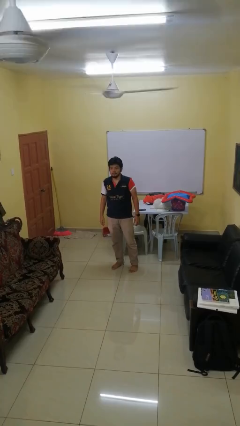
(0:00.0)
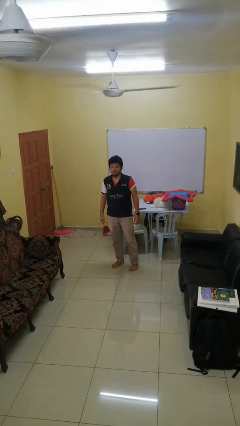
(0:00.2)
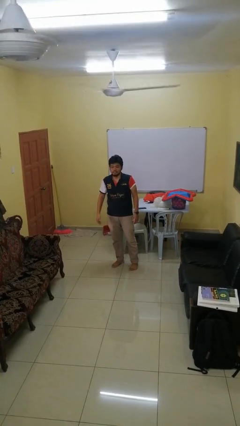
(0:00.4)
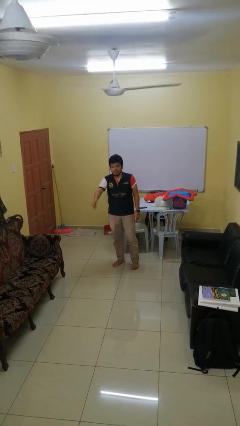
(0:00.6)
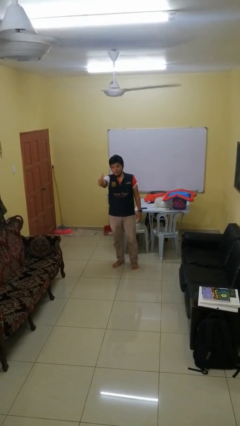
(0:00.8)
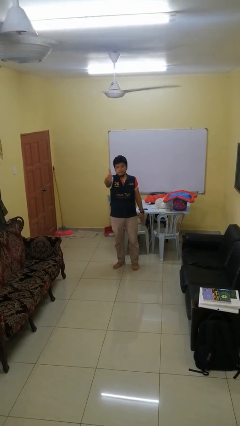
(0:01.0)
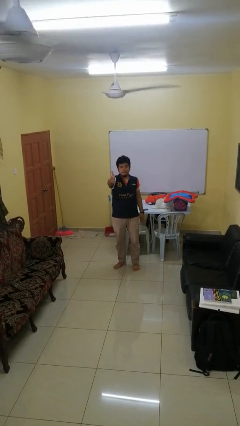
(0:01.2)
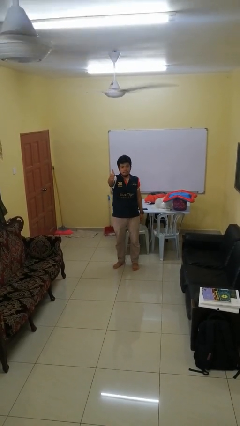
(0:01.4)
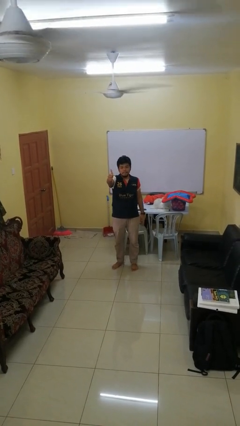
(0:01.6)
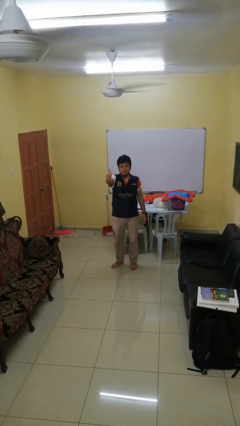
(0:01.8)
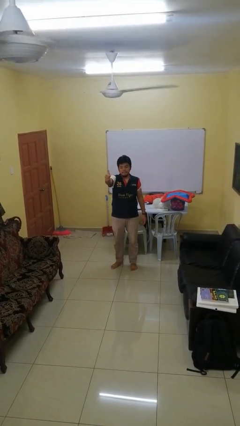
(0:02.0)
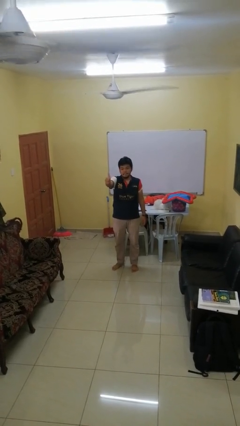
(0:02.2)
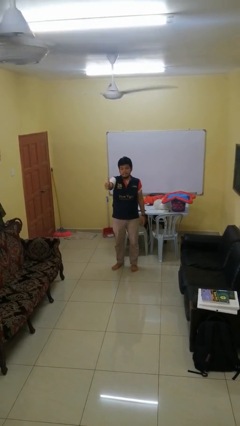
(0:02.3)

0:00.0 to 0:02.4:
person gestures thumbs up

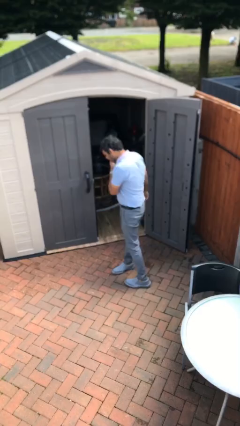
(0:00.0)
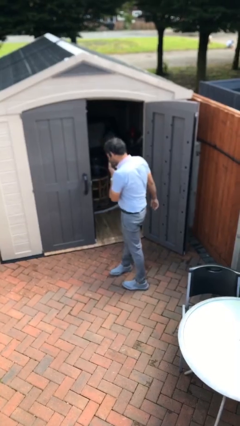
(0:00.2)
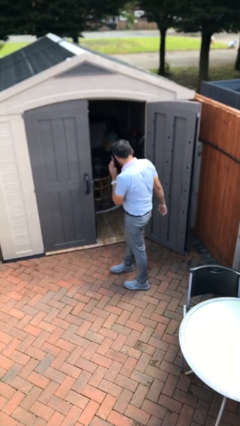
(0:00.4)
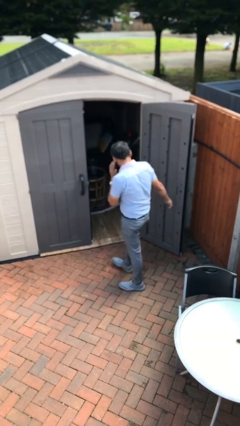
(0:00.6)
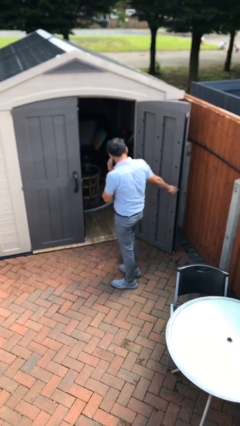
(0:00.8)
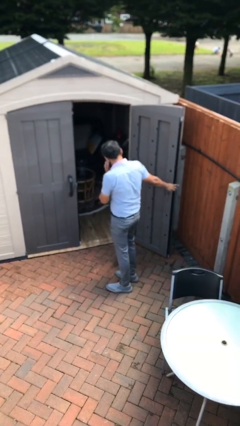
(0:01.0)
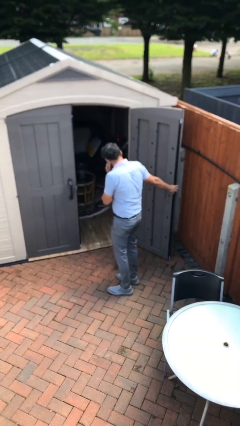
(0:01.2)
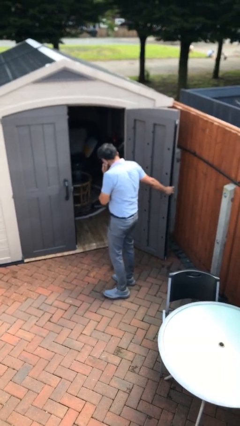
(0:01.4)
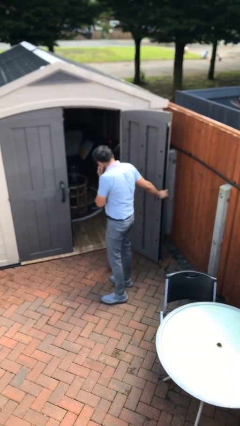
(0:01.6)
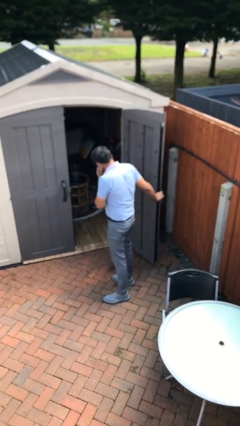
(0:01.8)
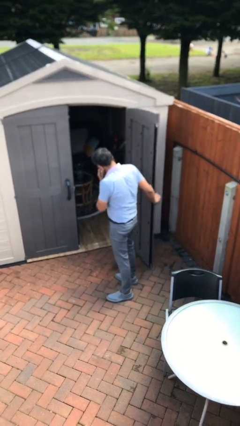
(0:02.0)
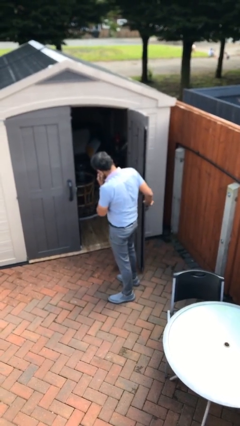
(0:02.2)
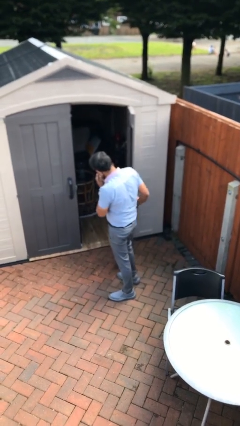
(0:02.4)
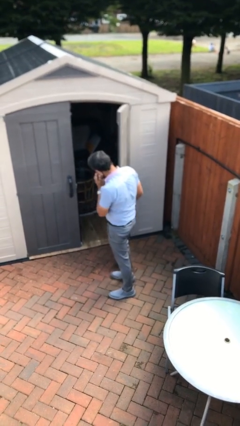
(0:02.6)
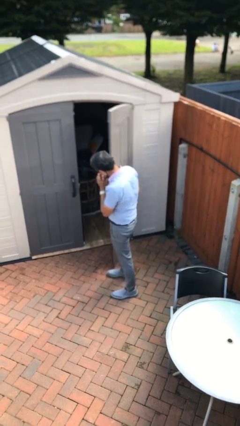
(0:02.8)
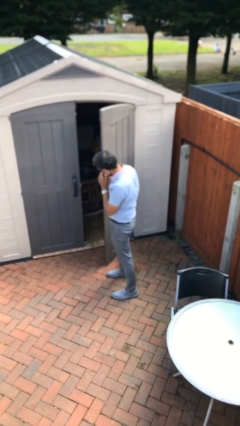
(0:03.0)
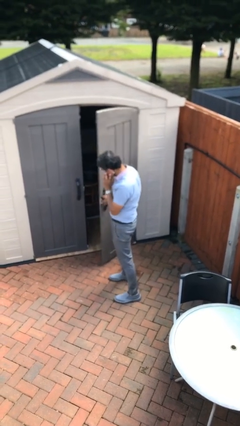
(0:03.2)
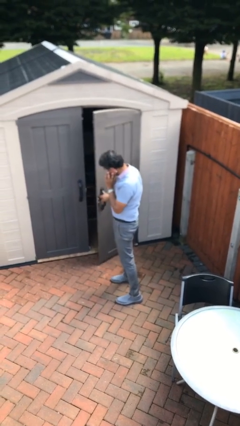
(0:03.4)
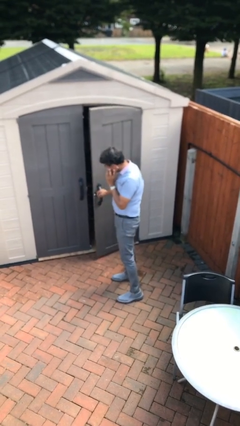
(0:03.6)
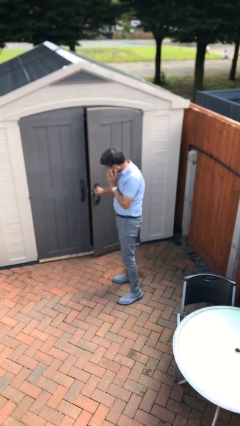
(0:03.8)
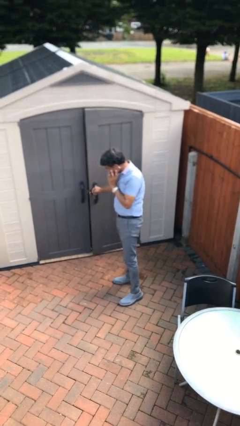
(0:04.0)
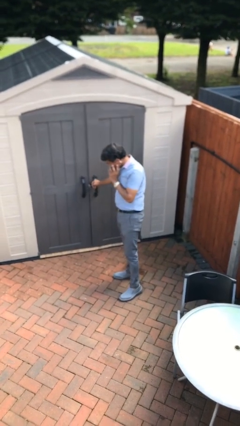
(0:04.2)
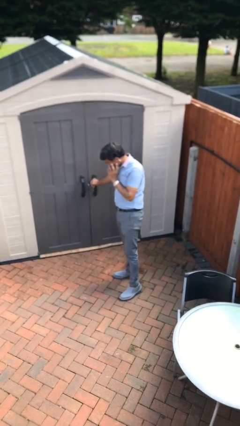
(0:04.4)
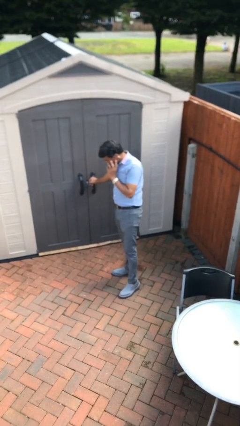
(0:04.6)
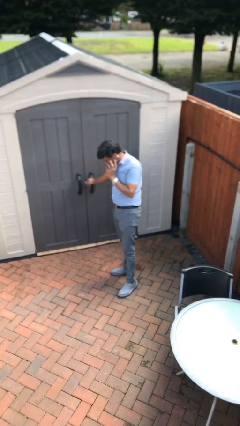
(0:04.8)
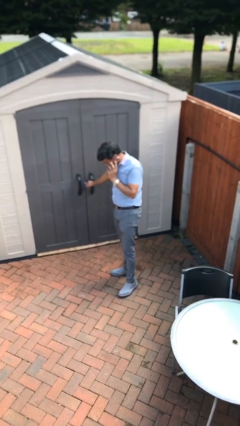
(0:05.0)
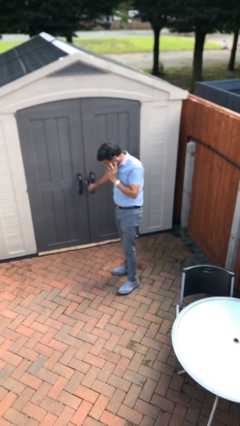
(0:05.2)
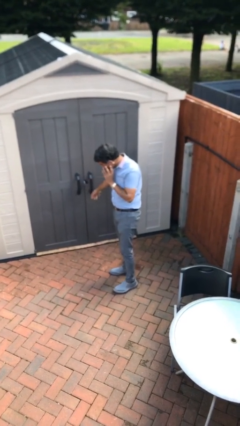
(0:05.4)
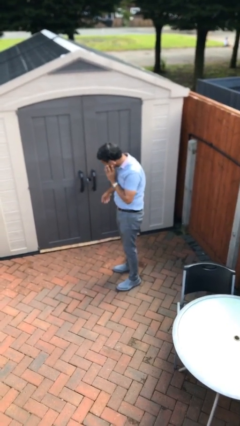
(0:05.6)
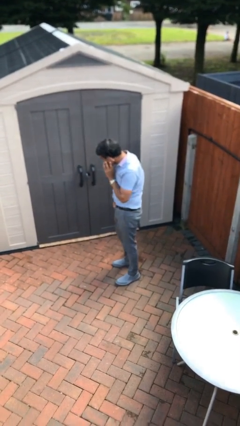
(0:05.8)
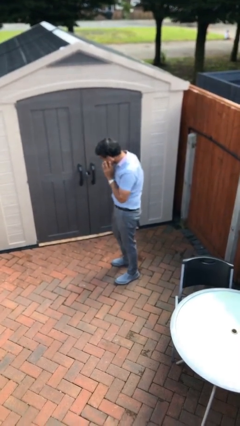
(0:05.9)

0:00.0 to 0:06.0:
person closes facility door

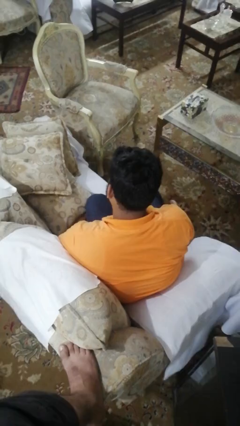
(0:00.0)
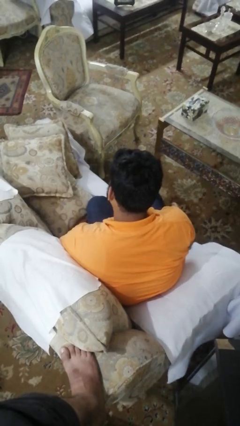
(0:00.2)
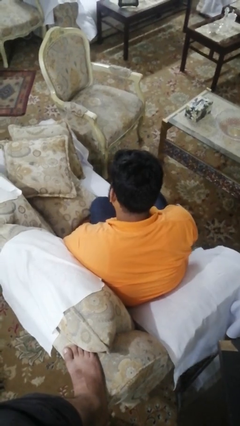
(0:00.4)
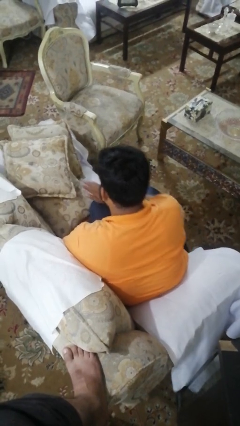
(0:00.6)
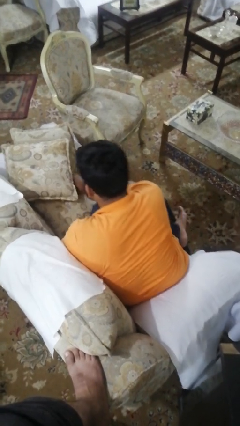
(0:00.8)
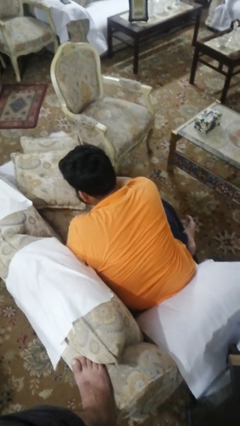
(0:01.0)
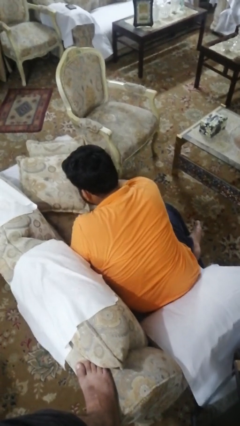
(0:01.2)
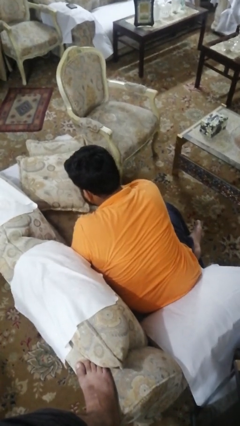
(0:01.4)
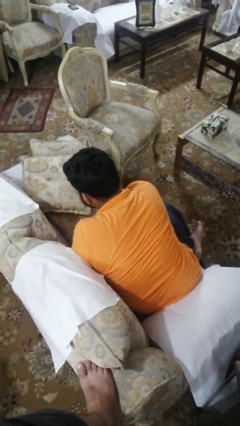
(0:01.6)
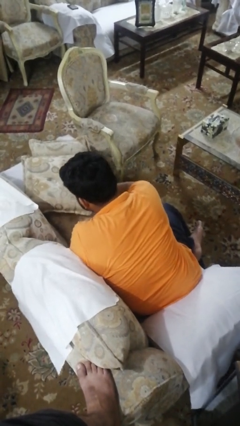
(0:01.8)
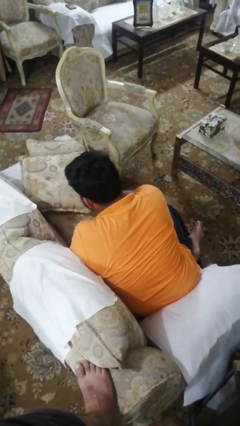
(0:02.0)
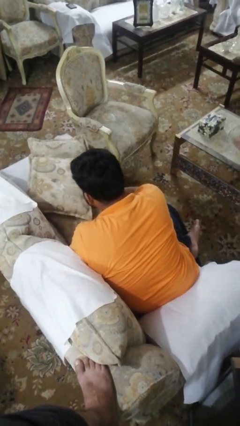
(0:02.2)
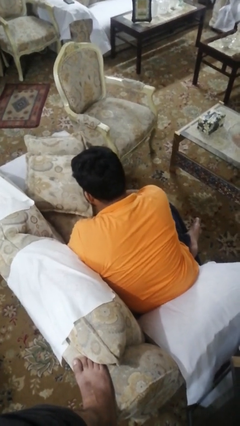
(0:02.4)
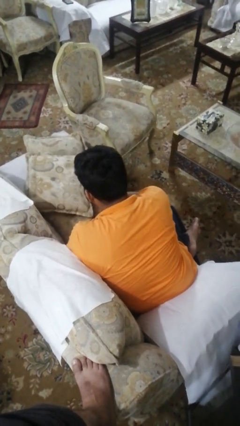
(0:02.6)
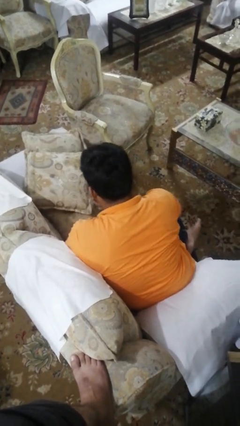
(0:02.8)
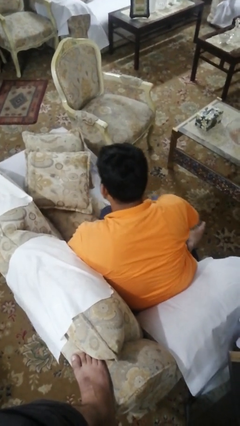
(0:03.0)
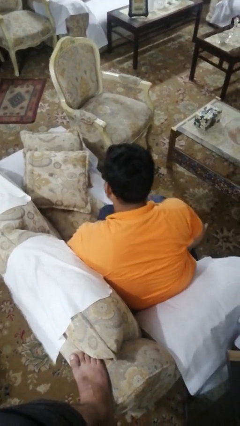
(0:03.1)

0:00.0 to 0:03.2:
person searches in couch

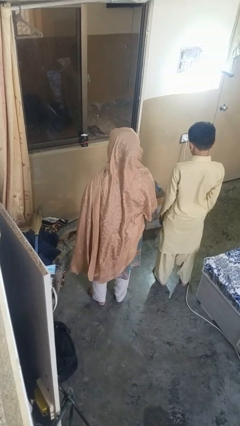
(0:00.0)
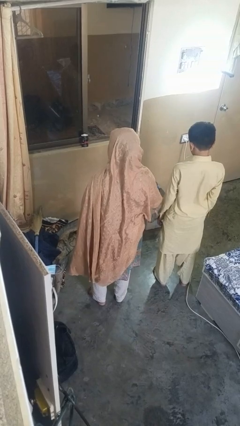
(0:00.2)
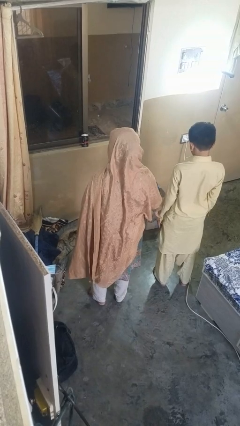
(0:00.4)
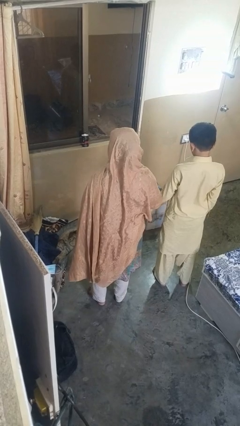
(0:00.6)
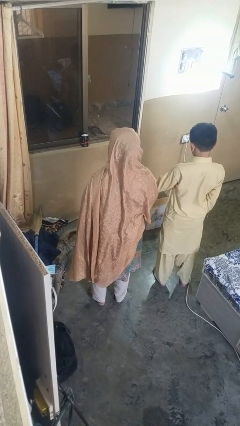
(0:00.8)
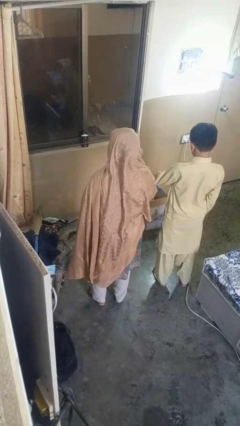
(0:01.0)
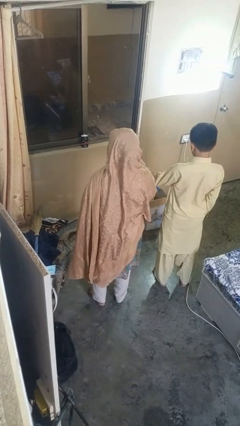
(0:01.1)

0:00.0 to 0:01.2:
person grabs person by forearm

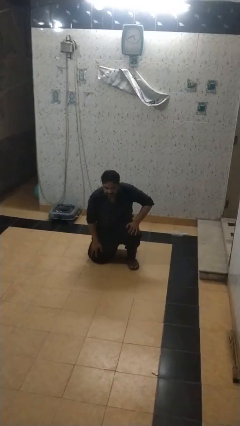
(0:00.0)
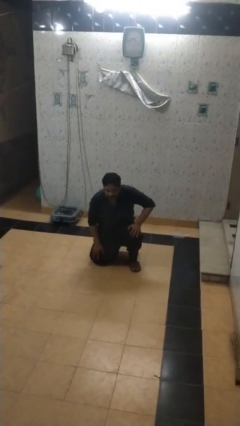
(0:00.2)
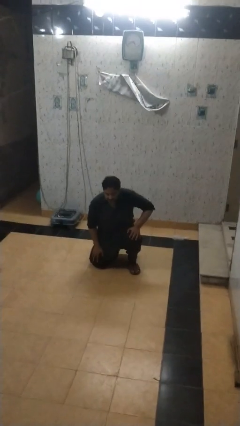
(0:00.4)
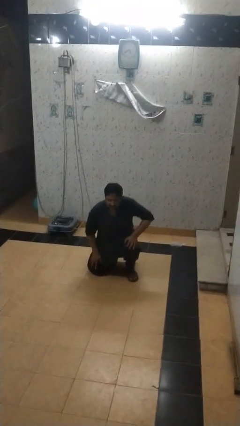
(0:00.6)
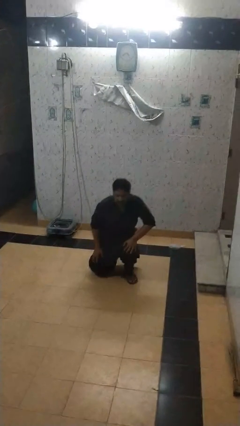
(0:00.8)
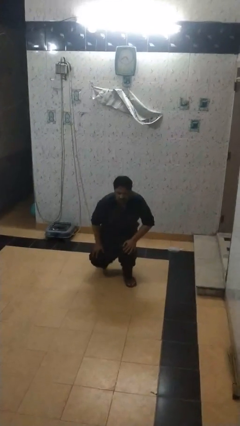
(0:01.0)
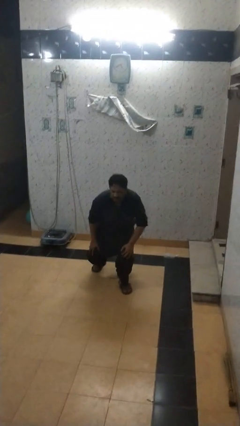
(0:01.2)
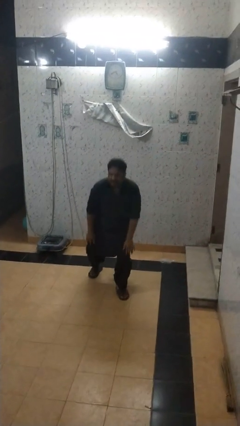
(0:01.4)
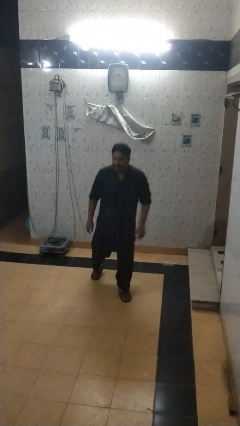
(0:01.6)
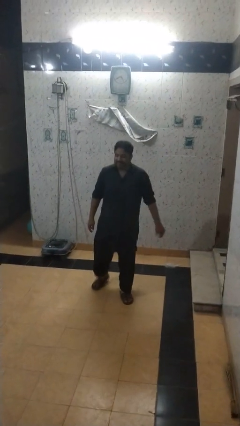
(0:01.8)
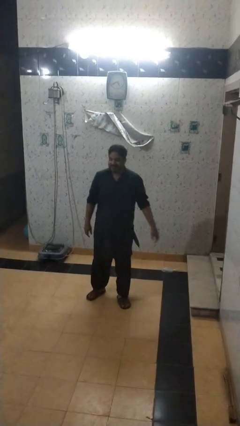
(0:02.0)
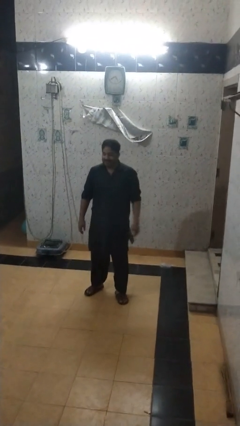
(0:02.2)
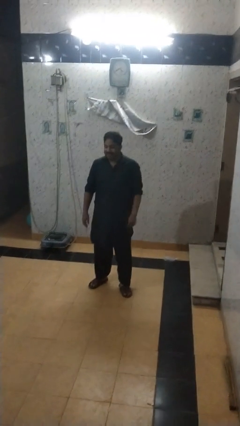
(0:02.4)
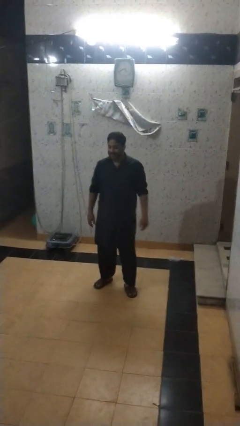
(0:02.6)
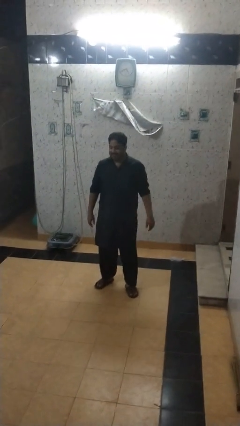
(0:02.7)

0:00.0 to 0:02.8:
person stands up from floor

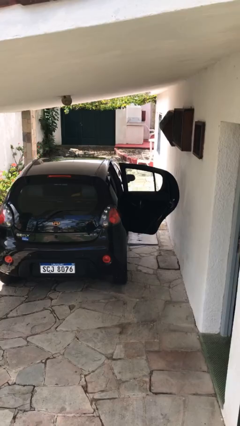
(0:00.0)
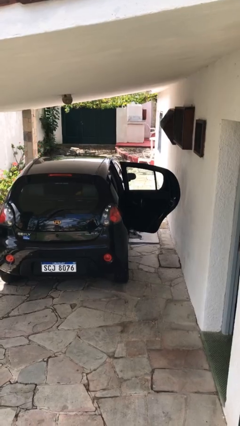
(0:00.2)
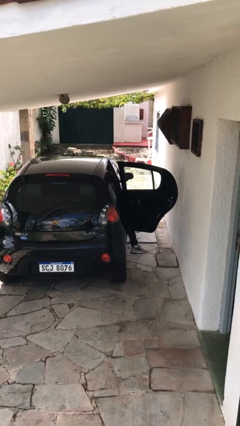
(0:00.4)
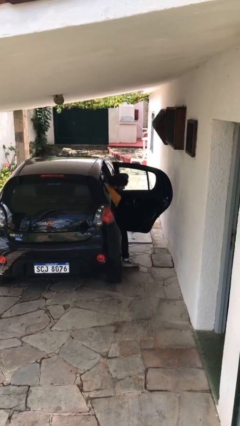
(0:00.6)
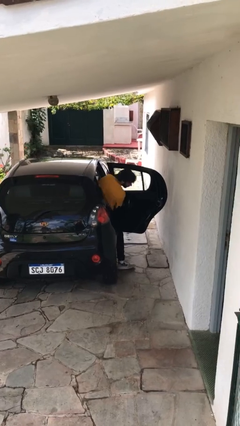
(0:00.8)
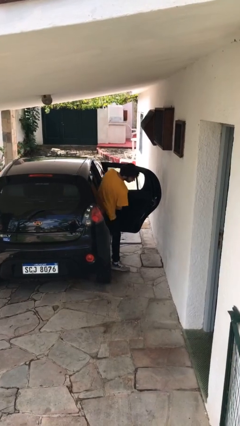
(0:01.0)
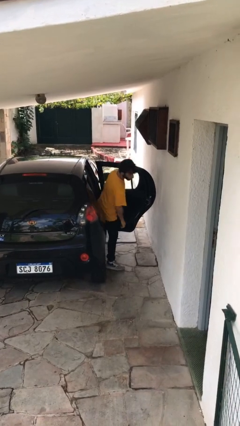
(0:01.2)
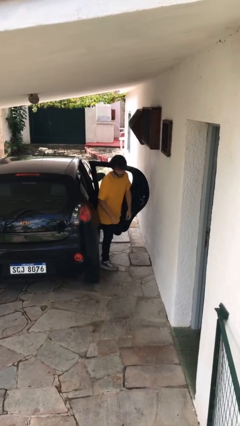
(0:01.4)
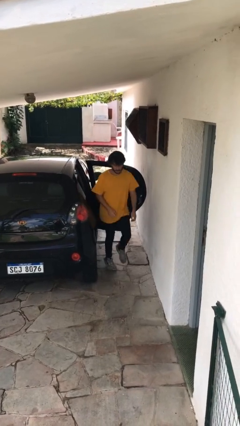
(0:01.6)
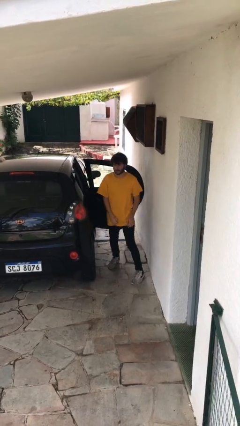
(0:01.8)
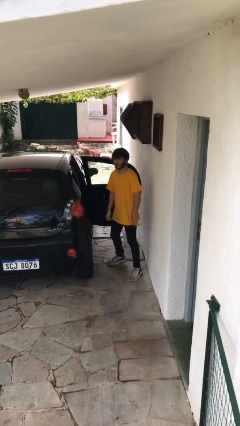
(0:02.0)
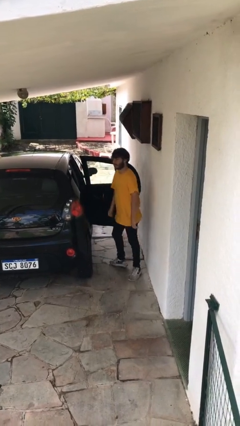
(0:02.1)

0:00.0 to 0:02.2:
person exits car

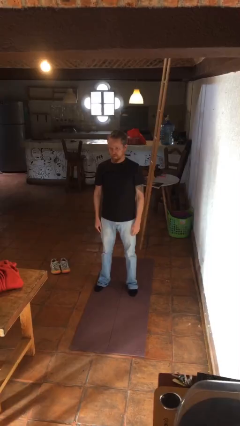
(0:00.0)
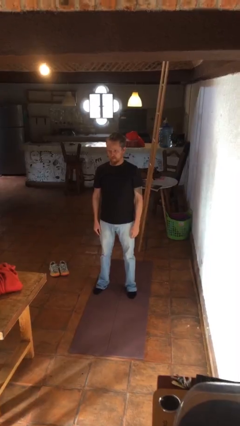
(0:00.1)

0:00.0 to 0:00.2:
person exercises with jumping jacks
